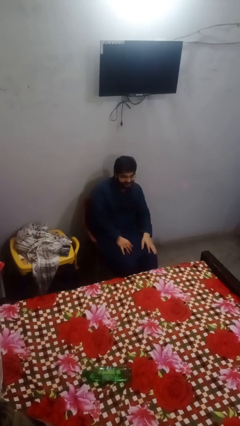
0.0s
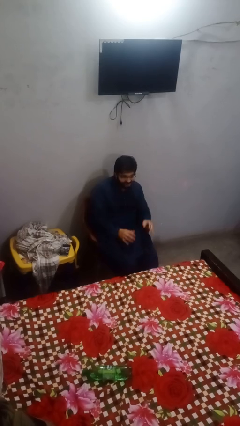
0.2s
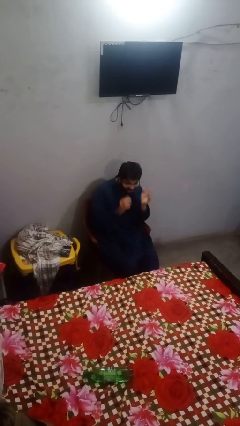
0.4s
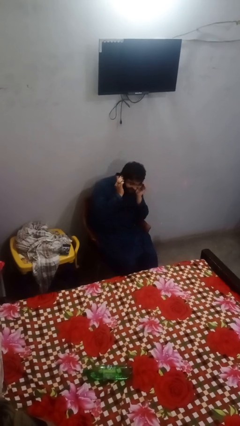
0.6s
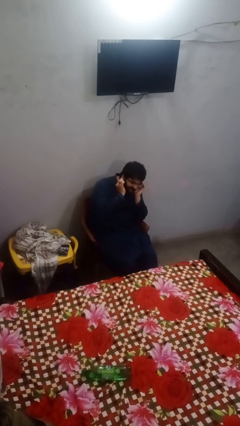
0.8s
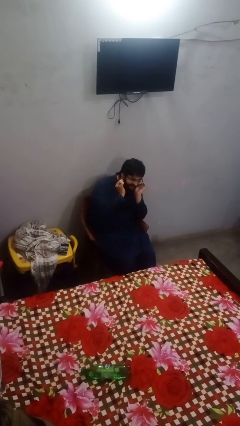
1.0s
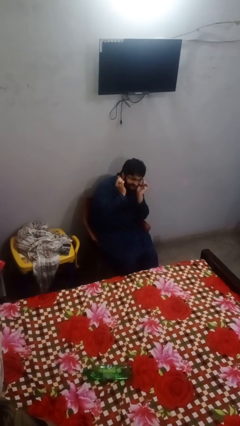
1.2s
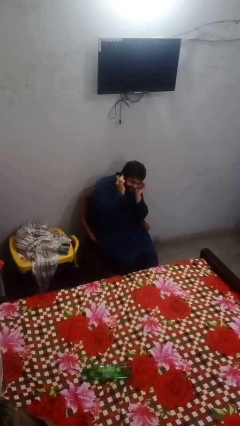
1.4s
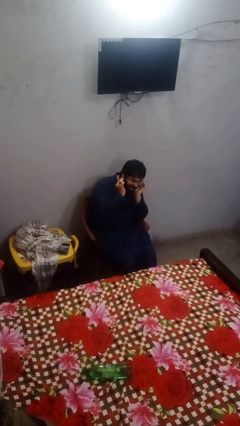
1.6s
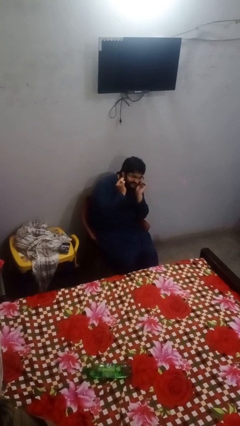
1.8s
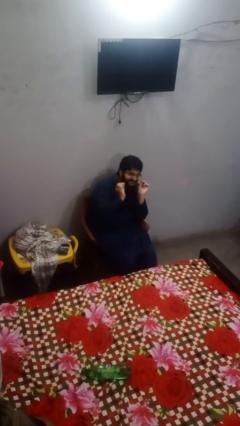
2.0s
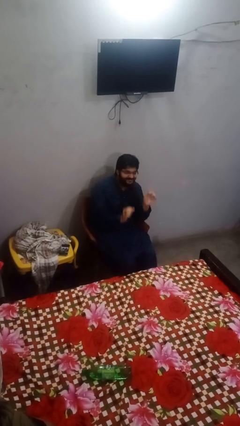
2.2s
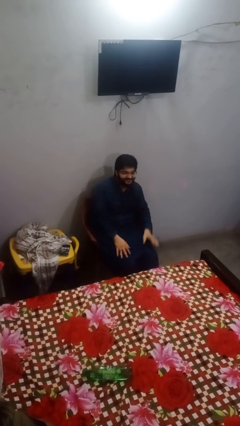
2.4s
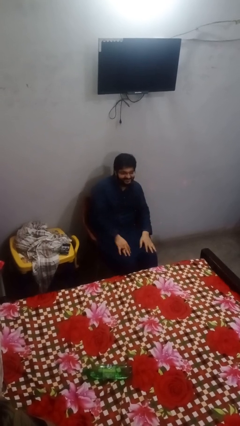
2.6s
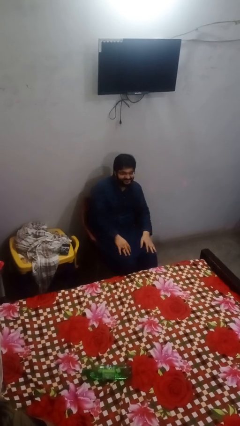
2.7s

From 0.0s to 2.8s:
person touches earlobe

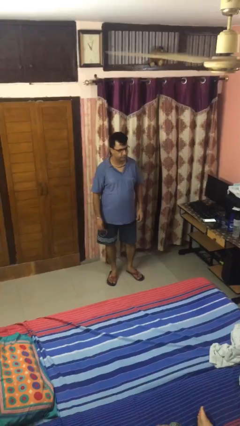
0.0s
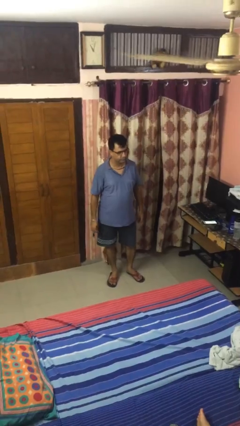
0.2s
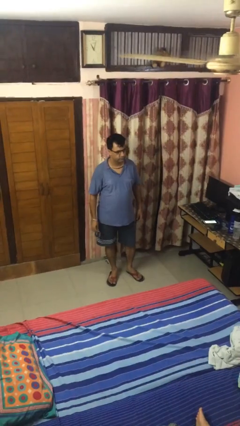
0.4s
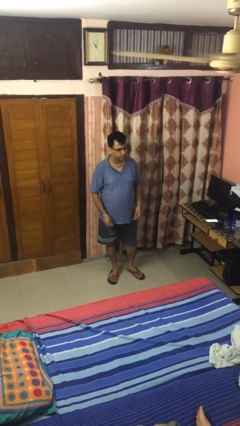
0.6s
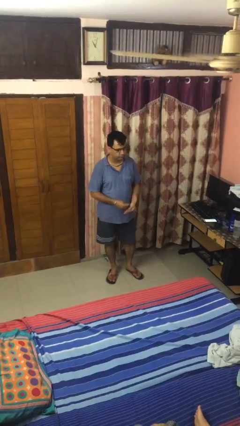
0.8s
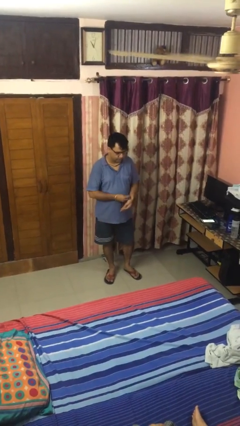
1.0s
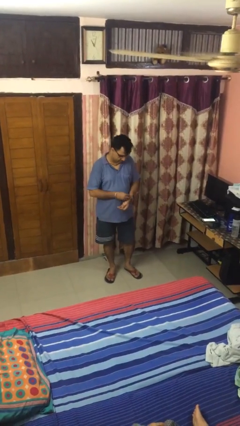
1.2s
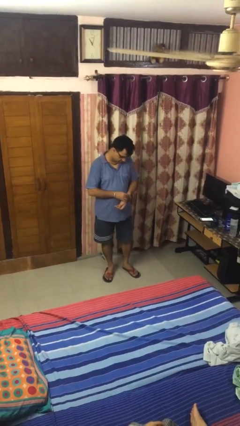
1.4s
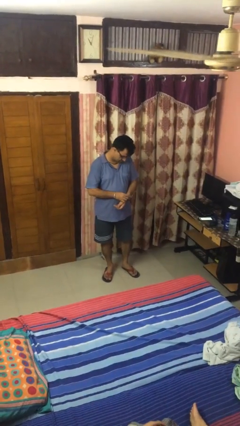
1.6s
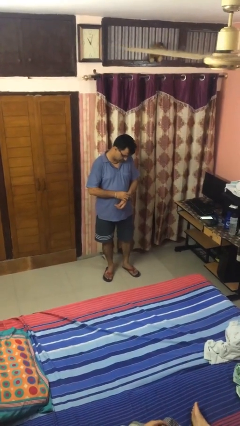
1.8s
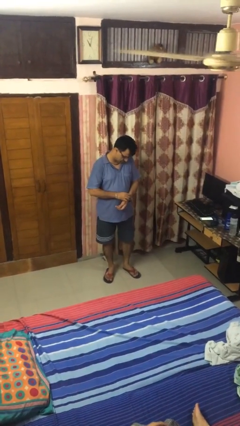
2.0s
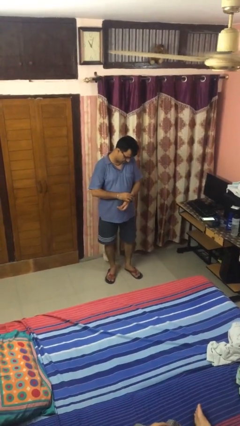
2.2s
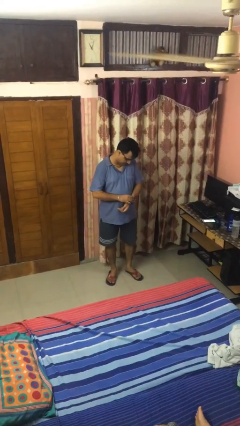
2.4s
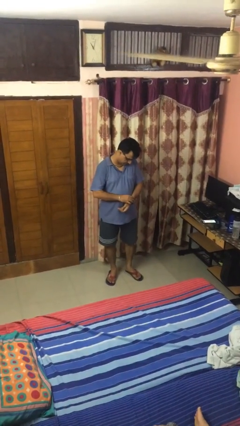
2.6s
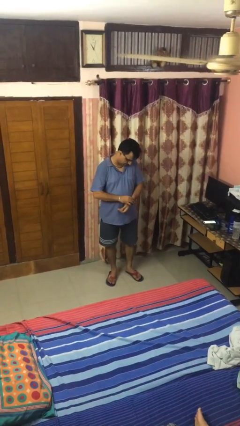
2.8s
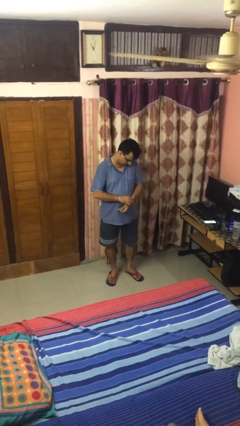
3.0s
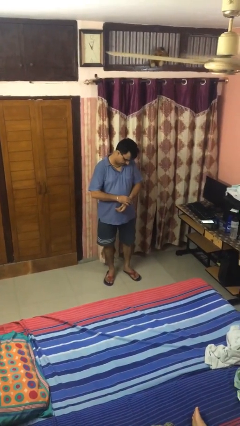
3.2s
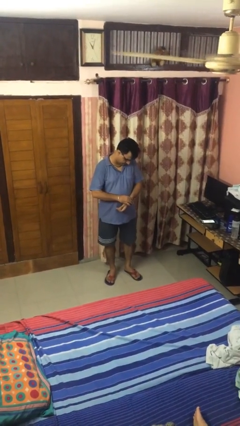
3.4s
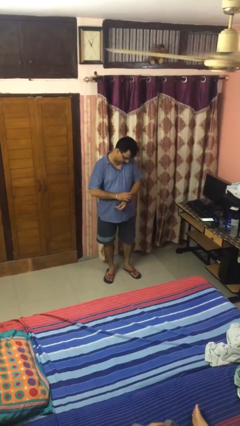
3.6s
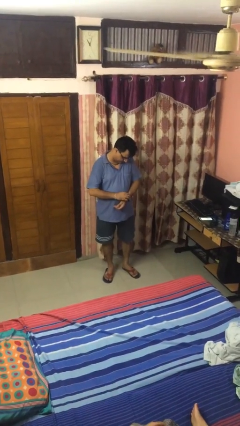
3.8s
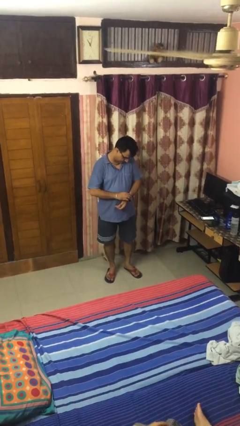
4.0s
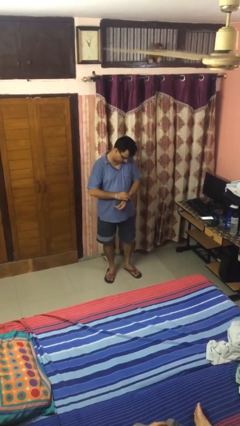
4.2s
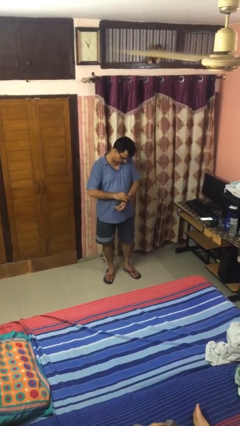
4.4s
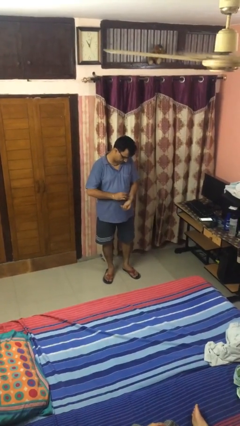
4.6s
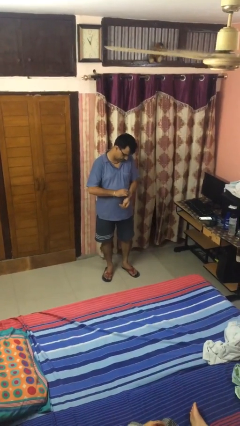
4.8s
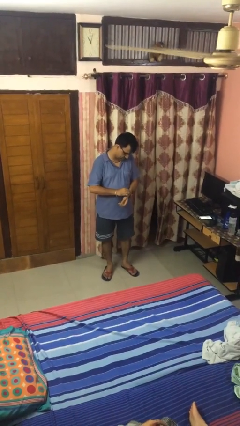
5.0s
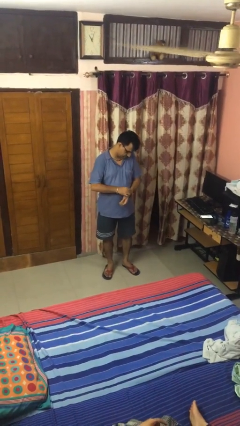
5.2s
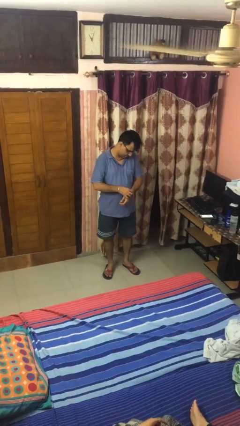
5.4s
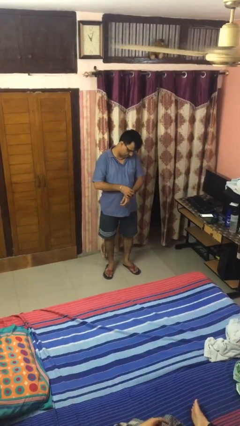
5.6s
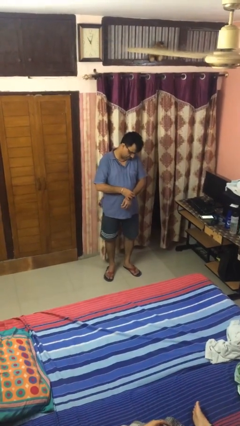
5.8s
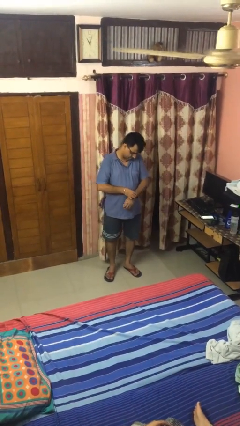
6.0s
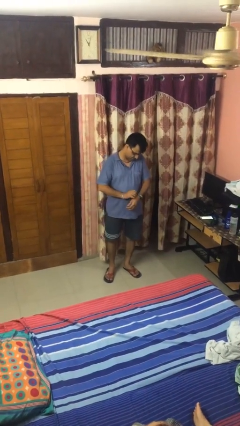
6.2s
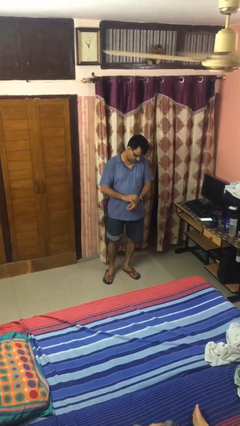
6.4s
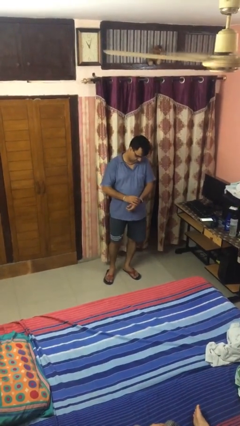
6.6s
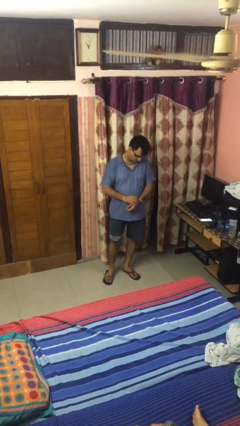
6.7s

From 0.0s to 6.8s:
person puts on wristwatch

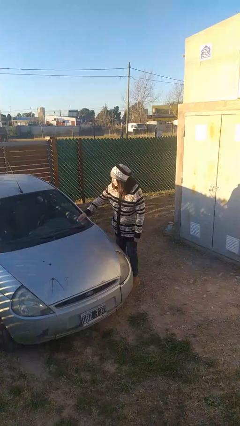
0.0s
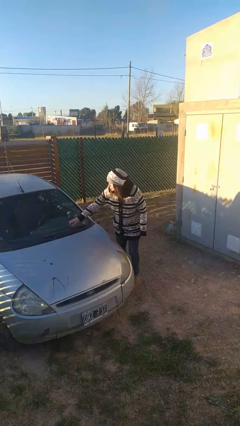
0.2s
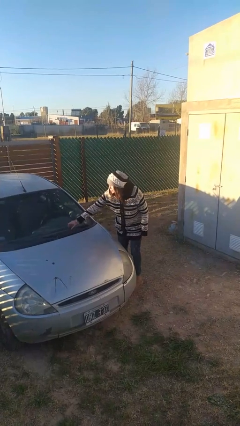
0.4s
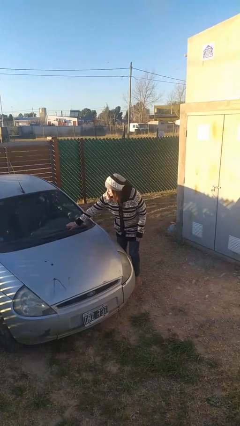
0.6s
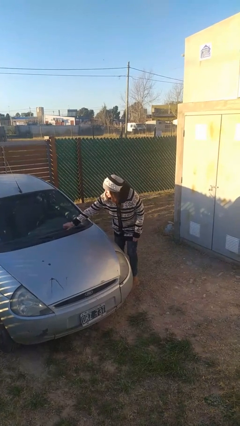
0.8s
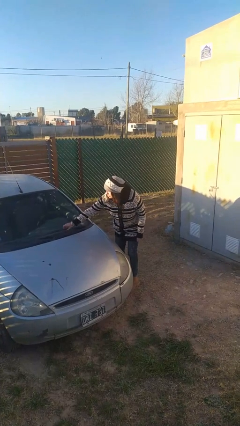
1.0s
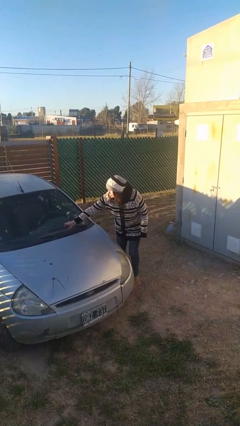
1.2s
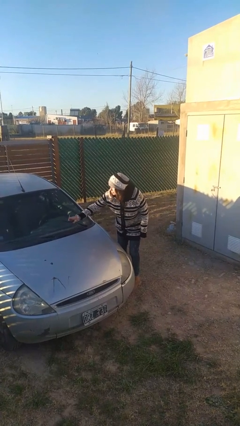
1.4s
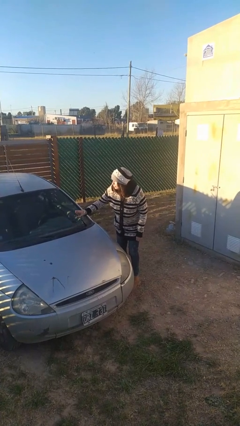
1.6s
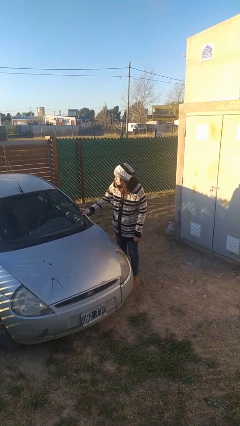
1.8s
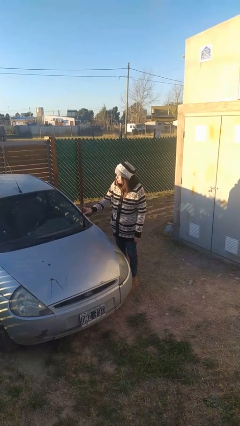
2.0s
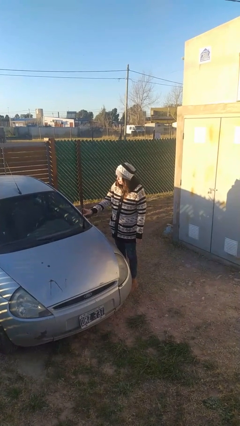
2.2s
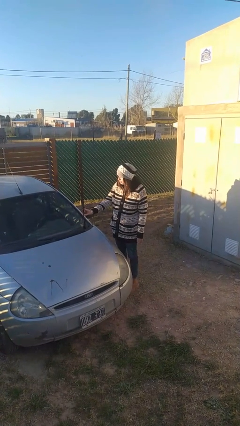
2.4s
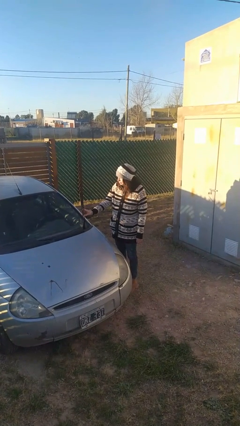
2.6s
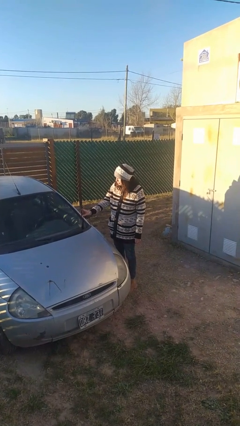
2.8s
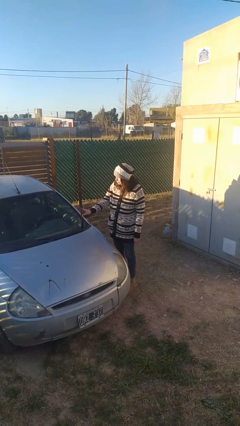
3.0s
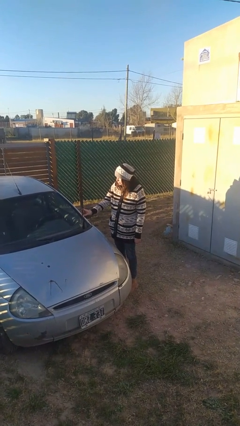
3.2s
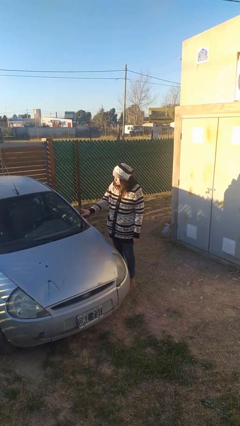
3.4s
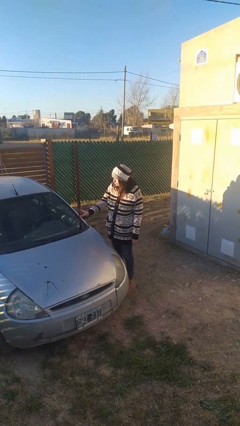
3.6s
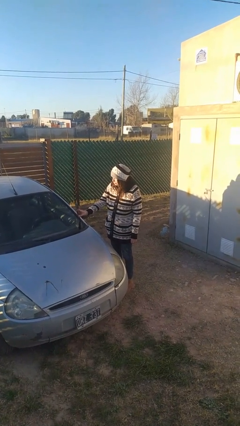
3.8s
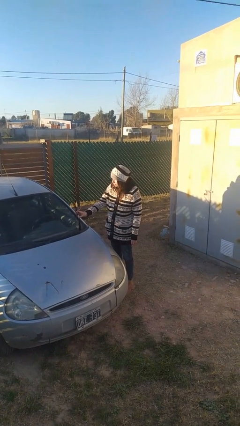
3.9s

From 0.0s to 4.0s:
person flips up car wipers

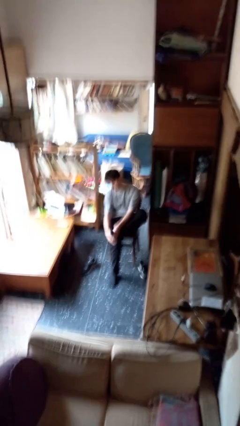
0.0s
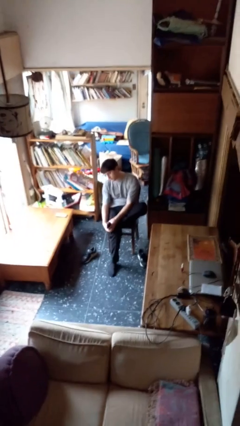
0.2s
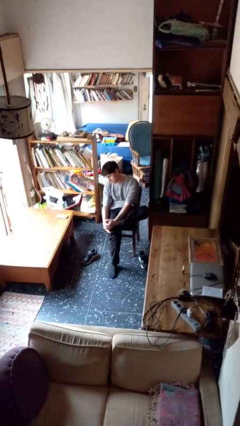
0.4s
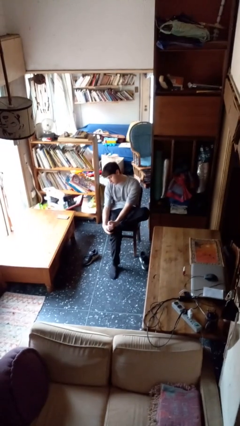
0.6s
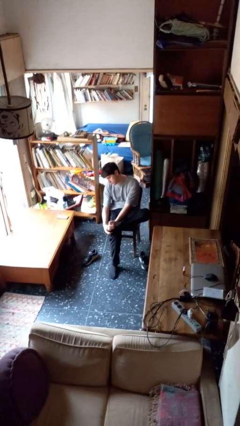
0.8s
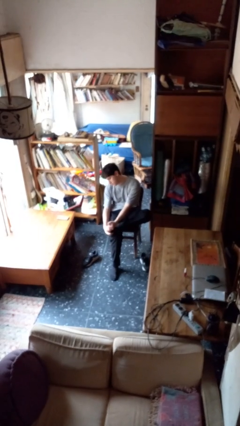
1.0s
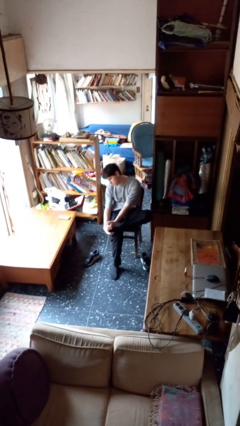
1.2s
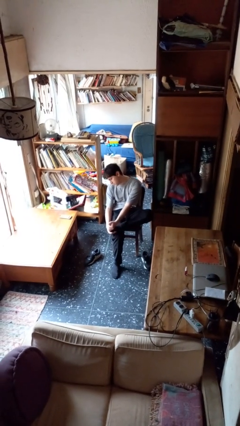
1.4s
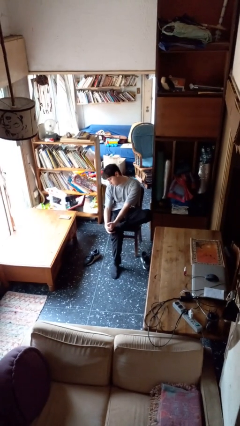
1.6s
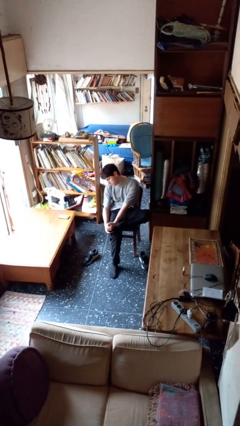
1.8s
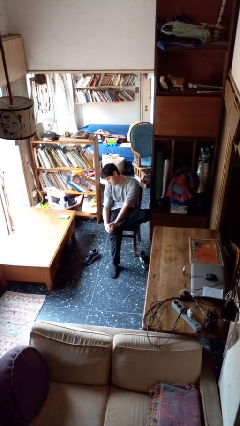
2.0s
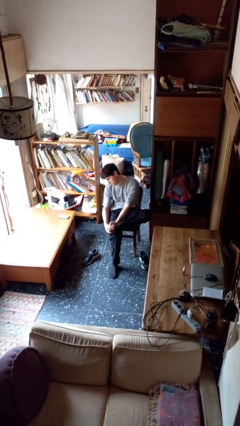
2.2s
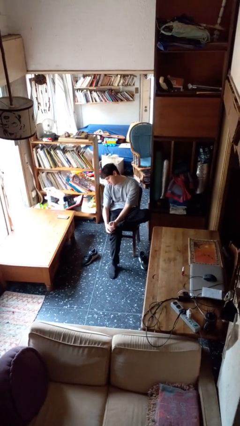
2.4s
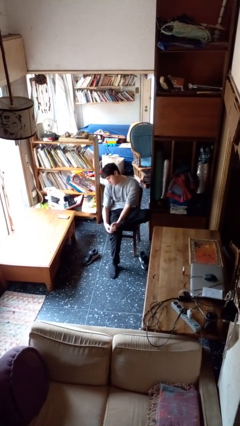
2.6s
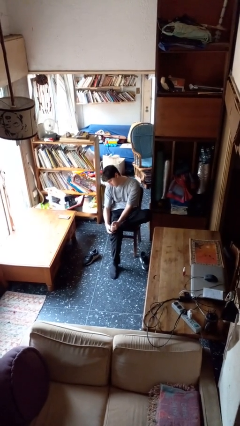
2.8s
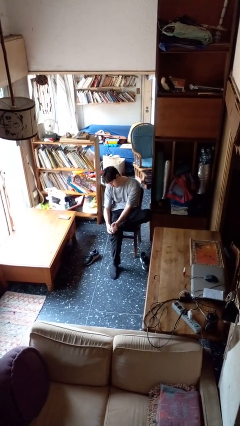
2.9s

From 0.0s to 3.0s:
person rubs foot

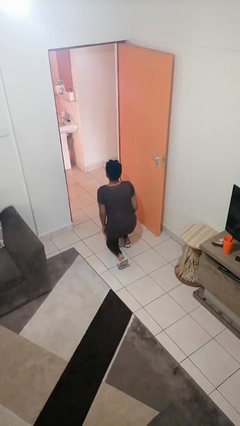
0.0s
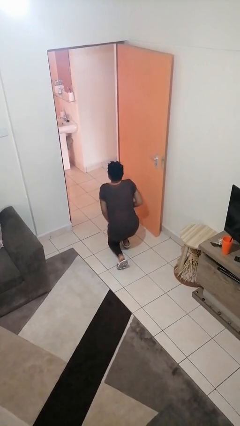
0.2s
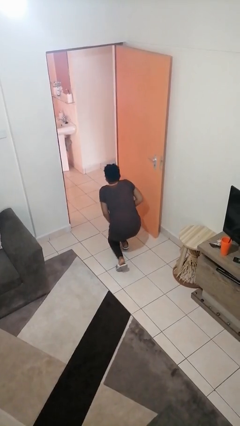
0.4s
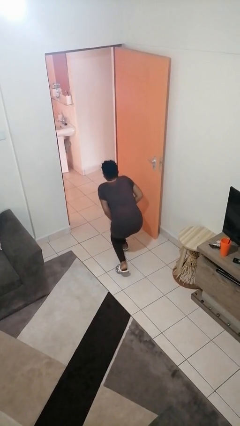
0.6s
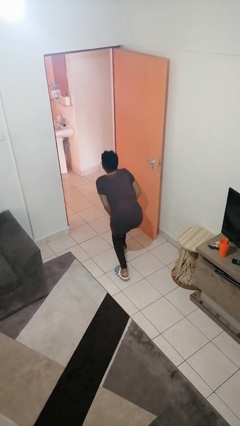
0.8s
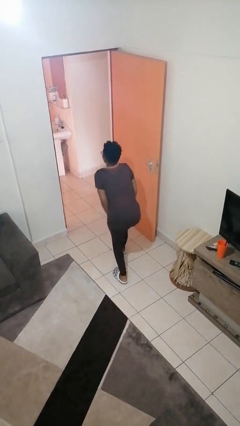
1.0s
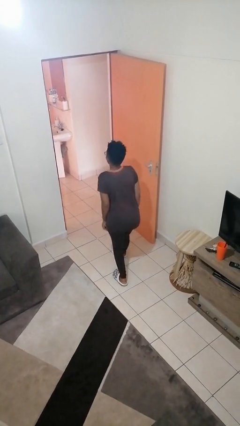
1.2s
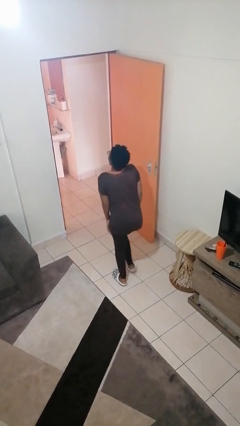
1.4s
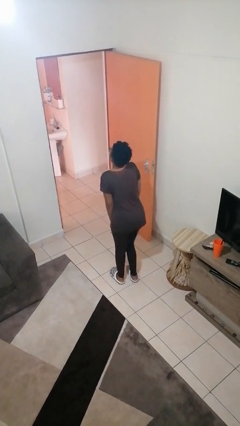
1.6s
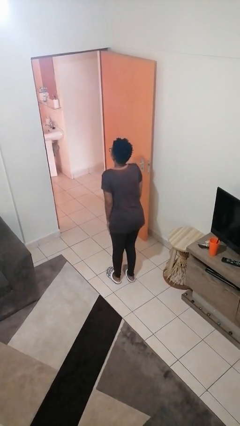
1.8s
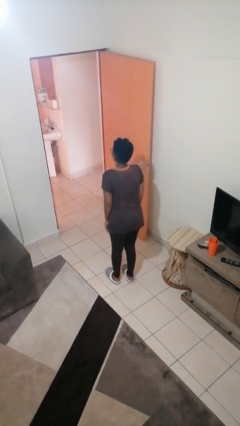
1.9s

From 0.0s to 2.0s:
person stands up from floor
